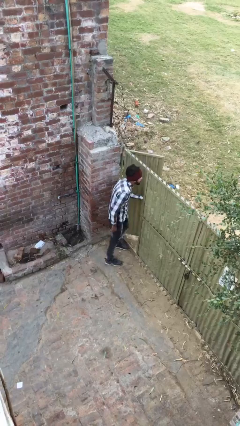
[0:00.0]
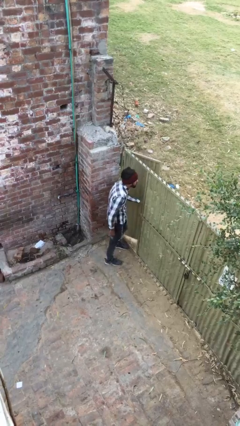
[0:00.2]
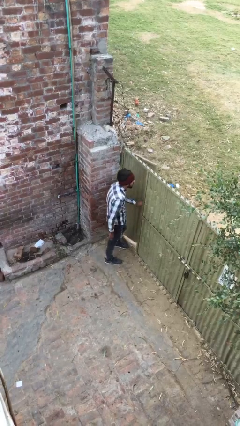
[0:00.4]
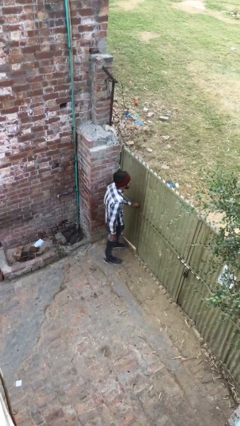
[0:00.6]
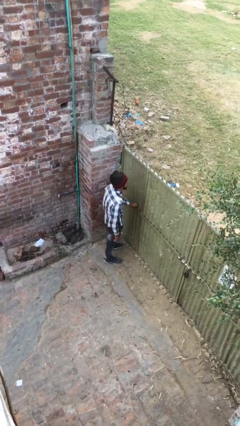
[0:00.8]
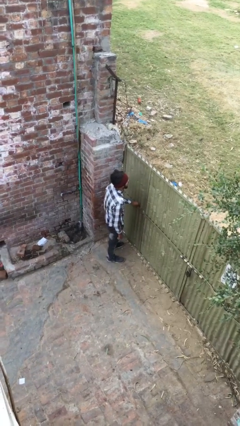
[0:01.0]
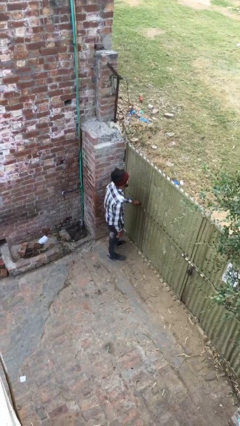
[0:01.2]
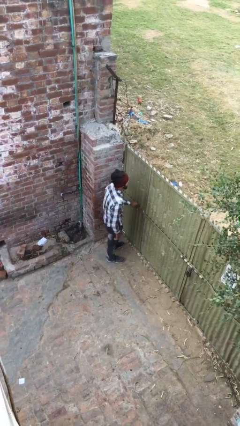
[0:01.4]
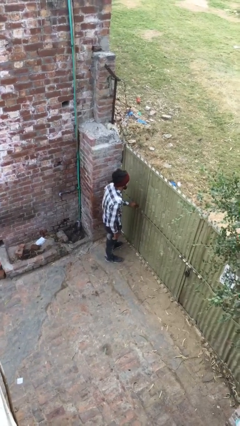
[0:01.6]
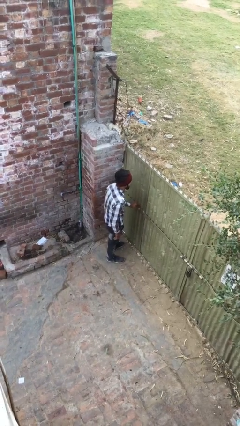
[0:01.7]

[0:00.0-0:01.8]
person closes facility door

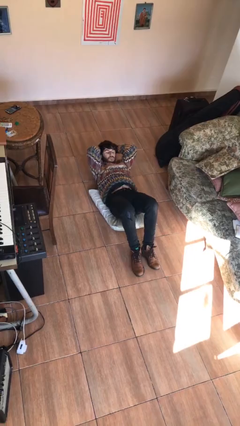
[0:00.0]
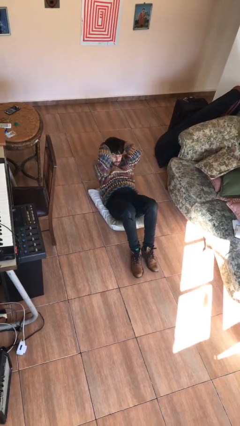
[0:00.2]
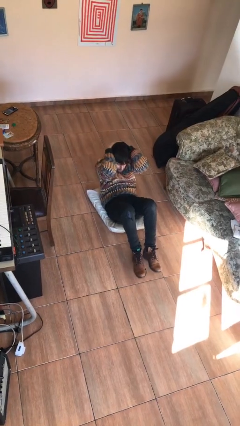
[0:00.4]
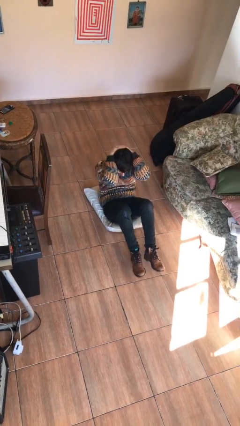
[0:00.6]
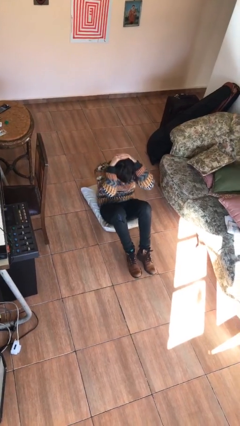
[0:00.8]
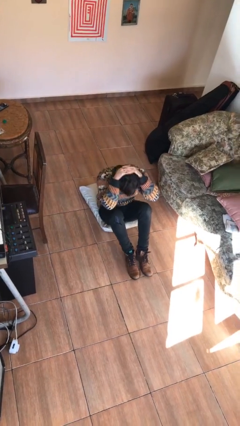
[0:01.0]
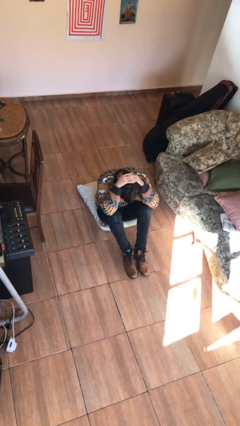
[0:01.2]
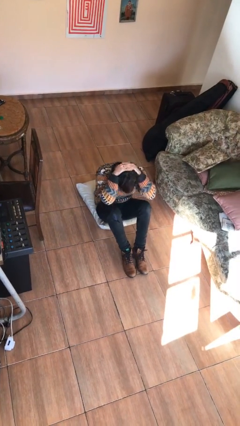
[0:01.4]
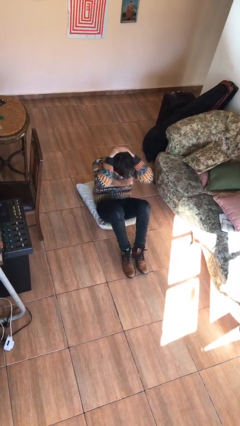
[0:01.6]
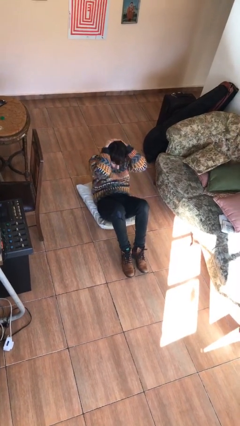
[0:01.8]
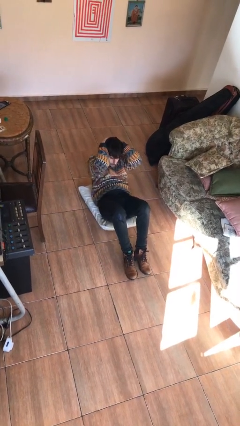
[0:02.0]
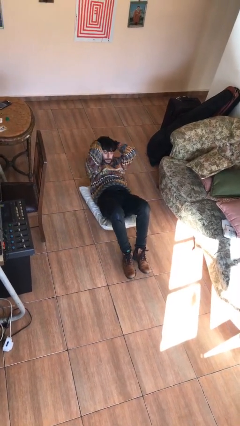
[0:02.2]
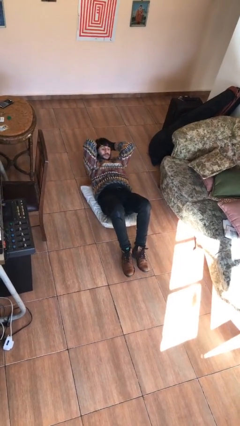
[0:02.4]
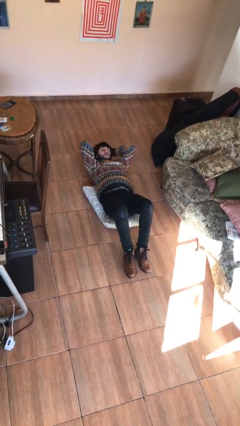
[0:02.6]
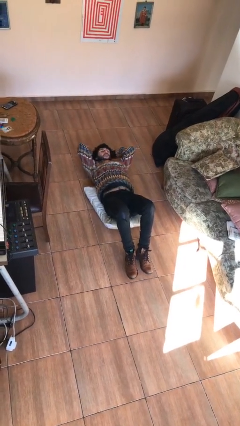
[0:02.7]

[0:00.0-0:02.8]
person exercises with situp

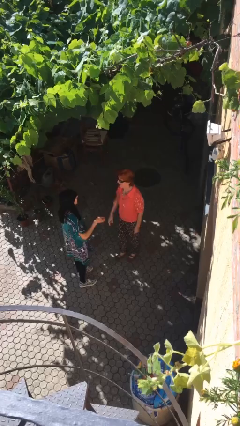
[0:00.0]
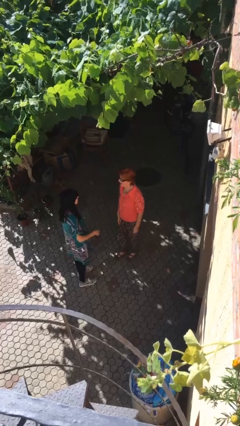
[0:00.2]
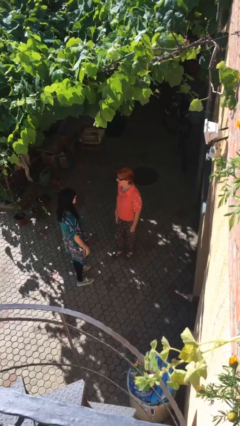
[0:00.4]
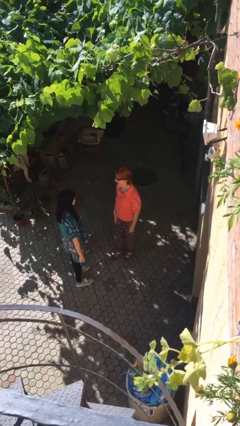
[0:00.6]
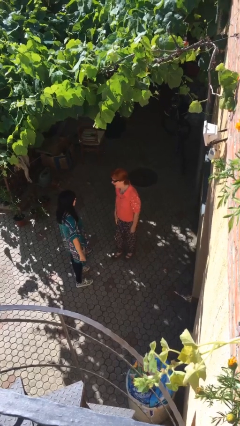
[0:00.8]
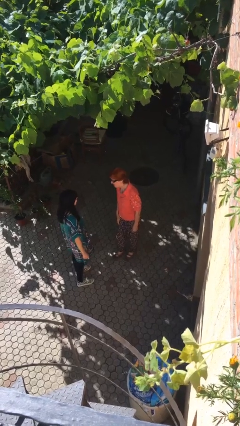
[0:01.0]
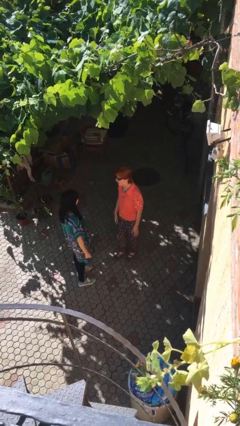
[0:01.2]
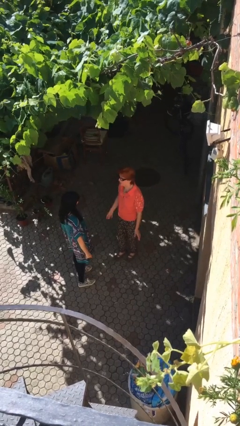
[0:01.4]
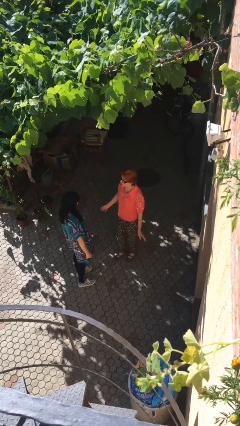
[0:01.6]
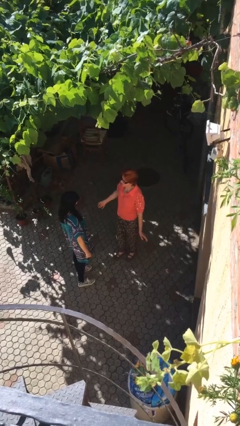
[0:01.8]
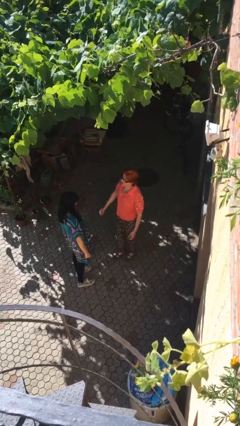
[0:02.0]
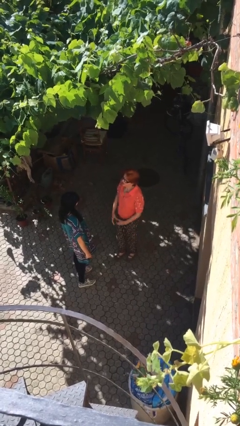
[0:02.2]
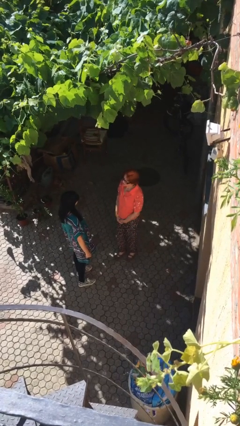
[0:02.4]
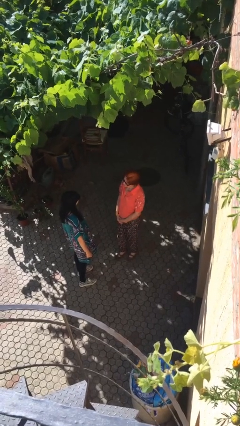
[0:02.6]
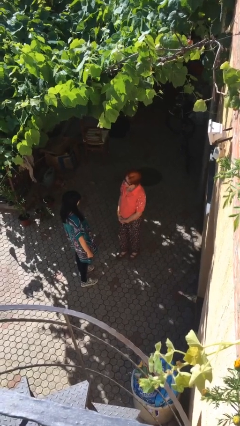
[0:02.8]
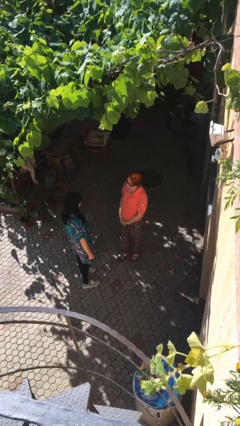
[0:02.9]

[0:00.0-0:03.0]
person talks to person

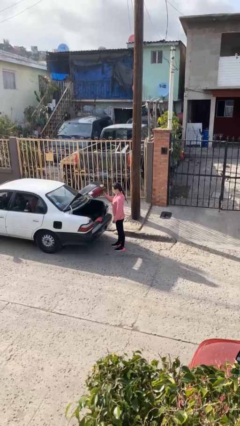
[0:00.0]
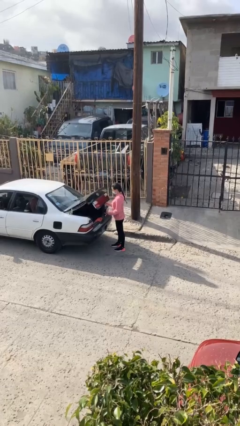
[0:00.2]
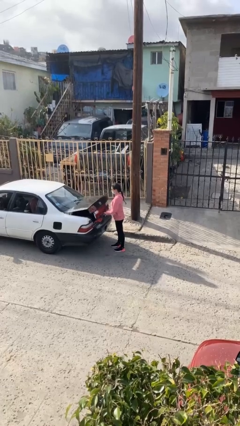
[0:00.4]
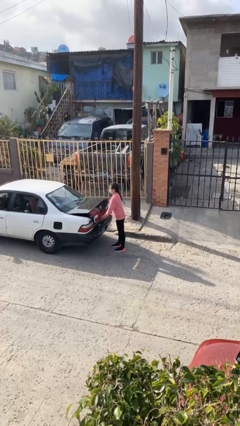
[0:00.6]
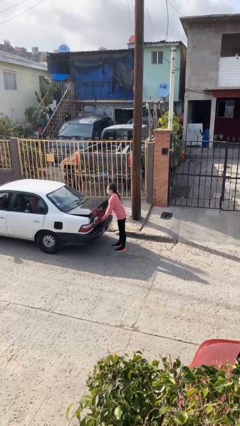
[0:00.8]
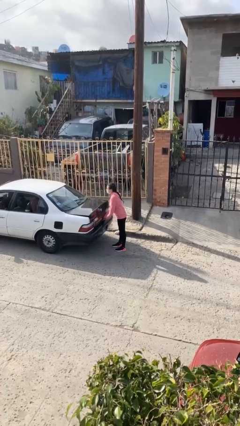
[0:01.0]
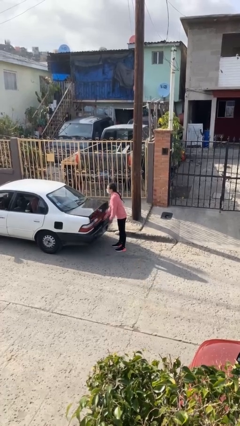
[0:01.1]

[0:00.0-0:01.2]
person closes car trunk

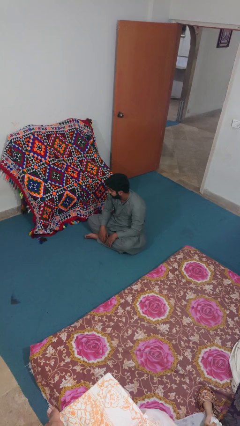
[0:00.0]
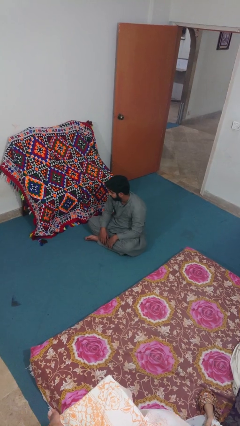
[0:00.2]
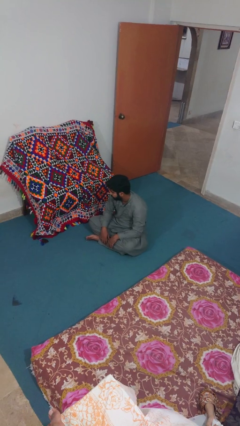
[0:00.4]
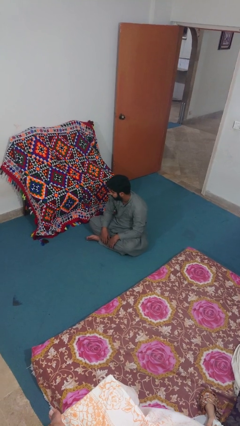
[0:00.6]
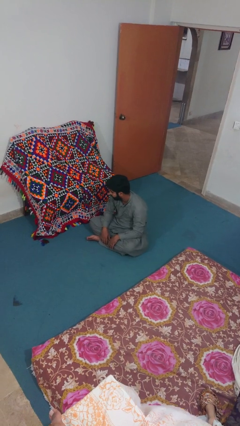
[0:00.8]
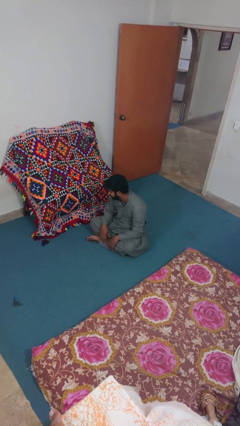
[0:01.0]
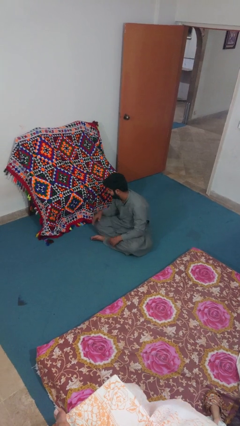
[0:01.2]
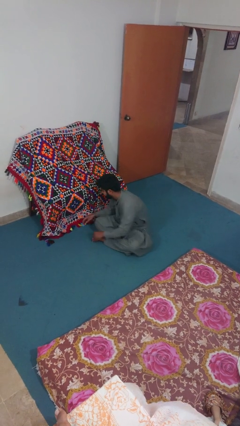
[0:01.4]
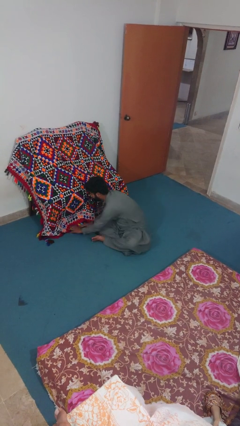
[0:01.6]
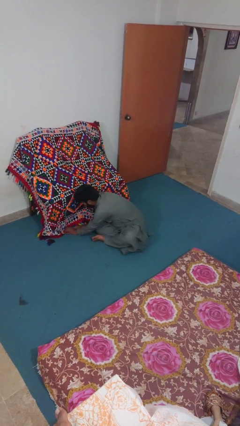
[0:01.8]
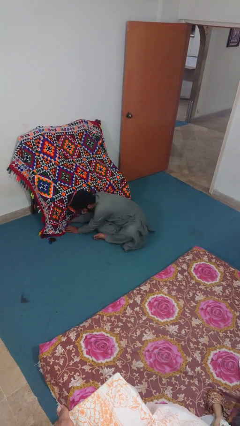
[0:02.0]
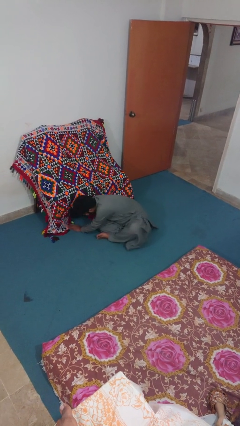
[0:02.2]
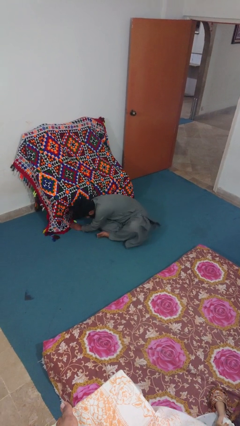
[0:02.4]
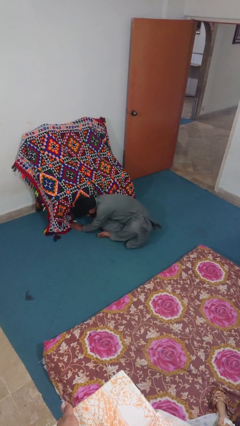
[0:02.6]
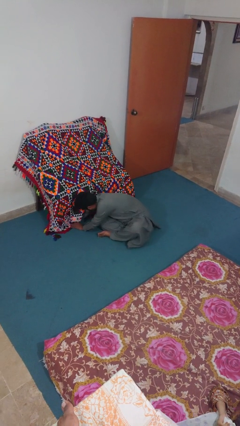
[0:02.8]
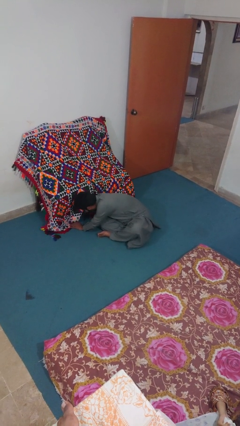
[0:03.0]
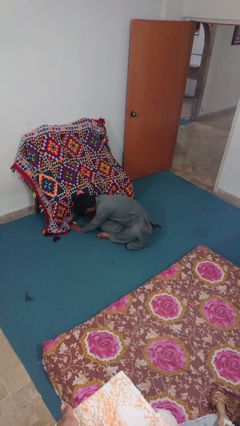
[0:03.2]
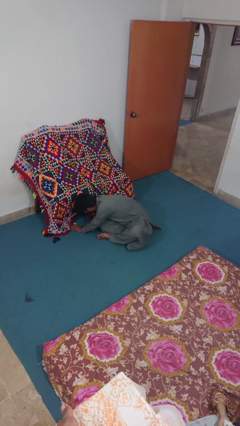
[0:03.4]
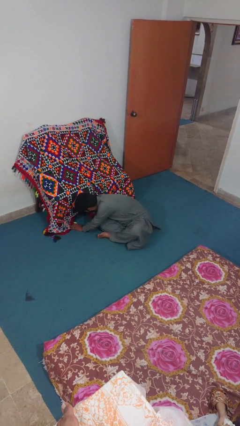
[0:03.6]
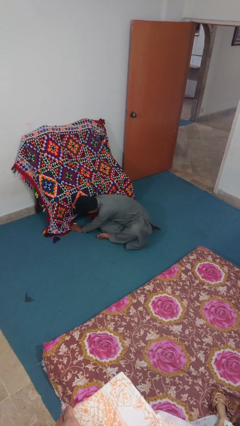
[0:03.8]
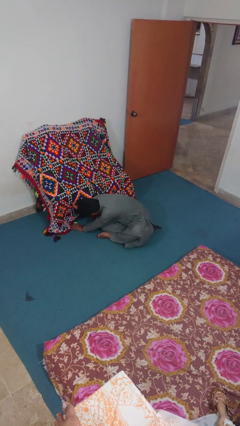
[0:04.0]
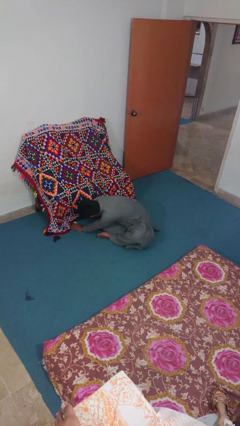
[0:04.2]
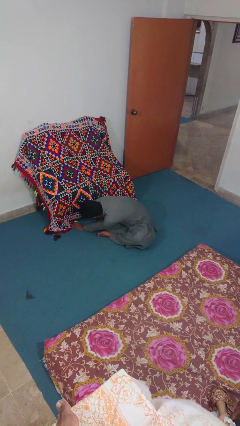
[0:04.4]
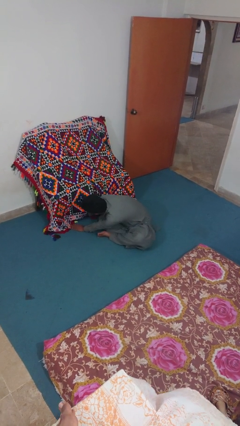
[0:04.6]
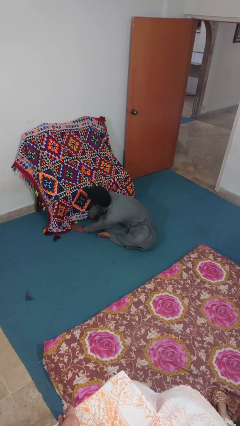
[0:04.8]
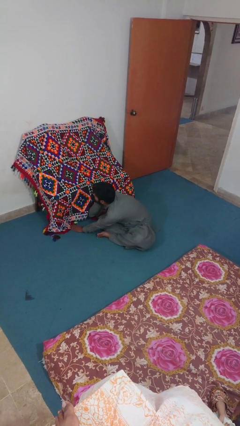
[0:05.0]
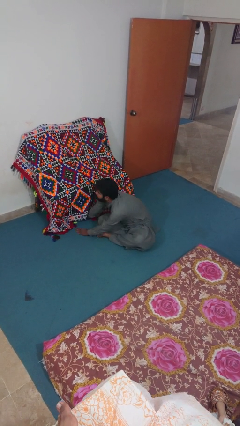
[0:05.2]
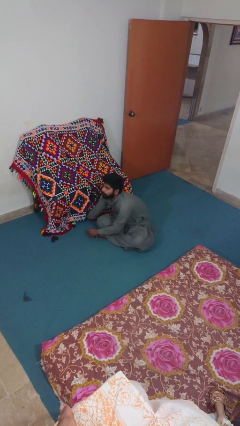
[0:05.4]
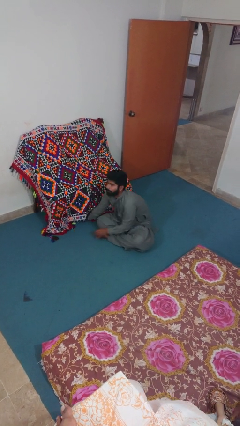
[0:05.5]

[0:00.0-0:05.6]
person searches under couch

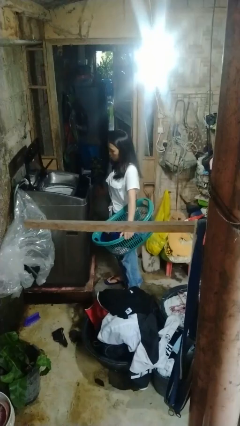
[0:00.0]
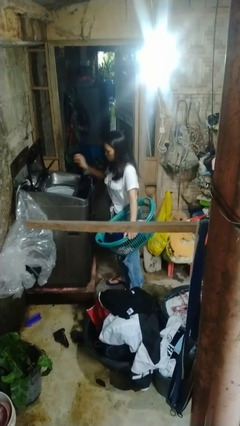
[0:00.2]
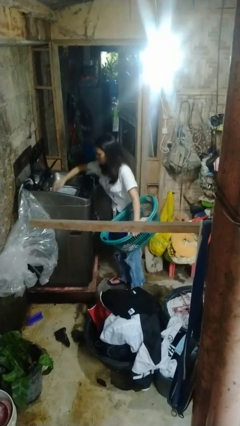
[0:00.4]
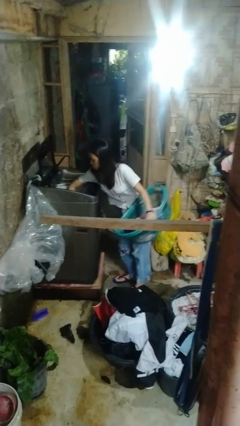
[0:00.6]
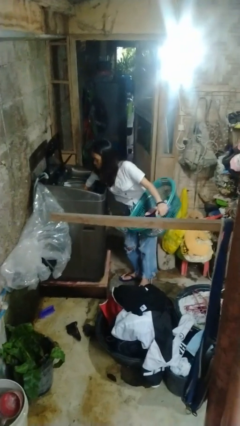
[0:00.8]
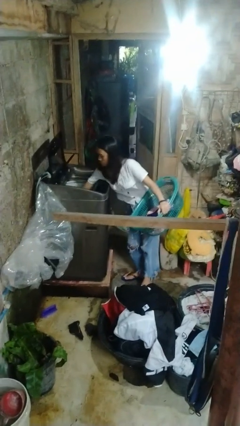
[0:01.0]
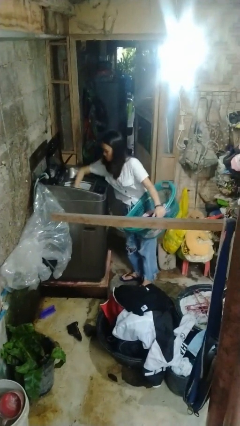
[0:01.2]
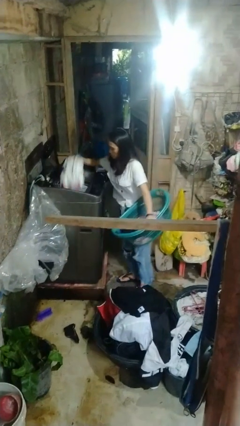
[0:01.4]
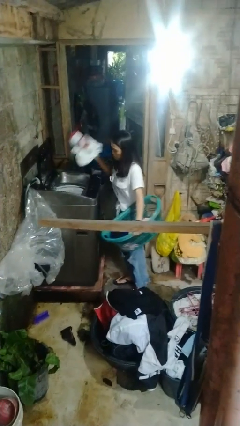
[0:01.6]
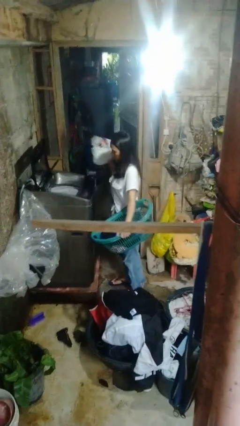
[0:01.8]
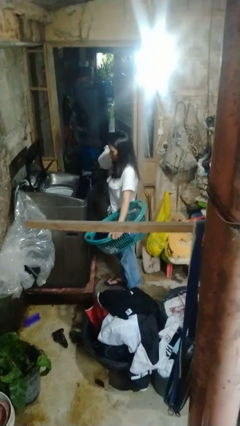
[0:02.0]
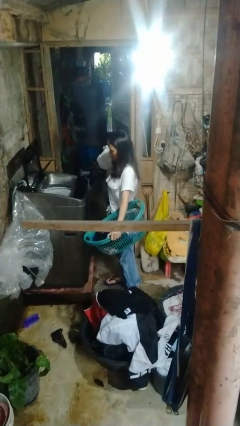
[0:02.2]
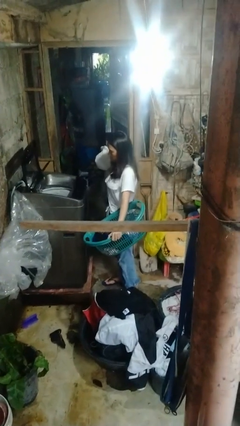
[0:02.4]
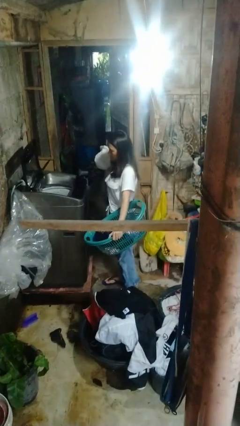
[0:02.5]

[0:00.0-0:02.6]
person unloads clotheswasher

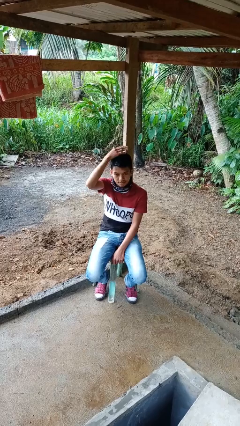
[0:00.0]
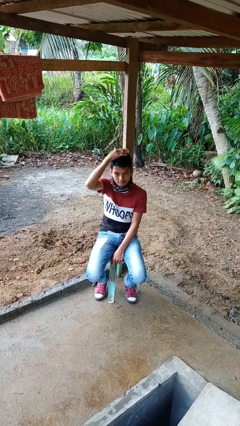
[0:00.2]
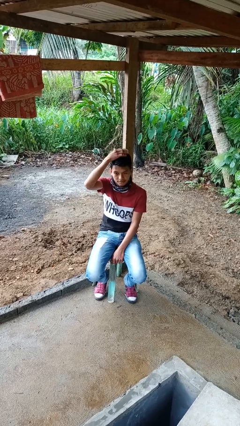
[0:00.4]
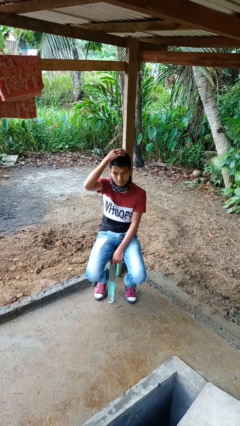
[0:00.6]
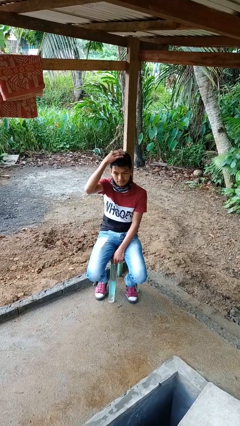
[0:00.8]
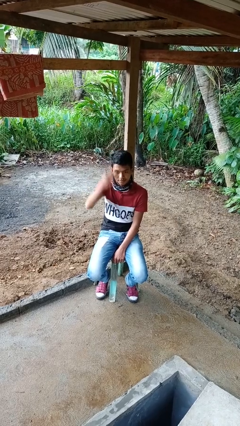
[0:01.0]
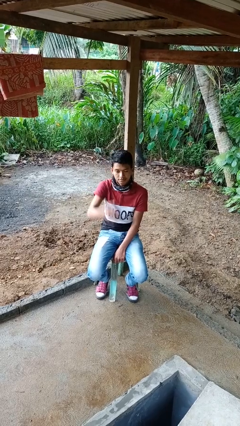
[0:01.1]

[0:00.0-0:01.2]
person pats head
